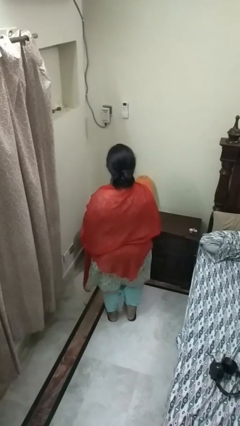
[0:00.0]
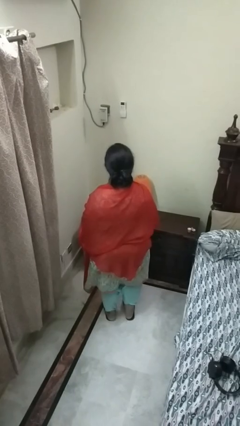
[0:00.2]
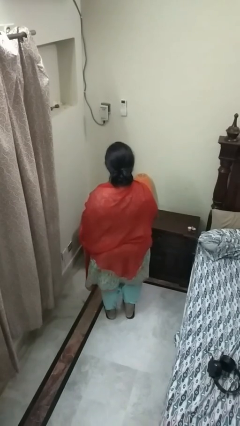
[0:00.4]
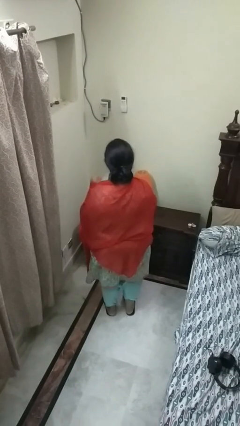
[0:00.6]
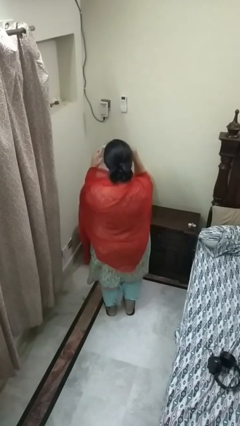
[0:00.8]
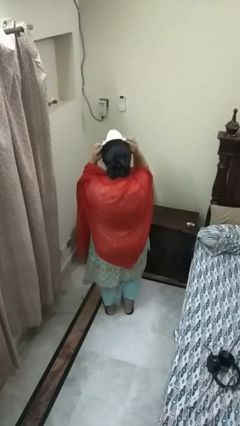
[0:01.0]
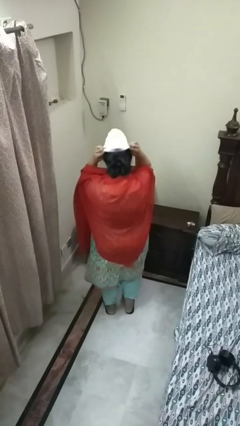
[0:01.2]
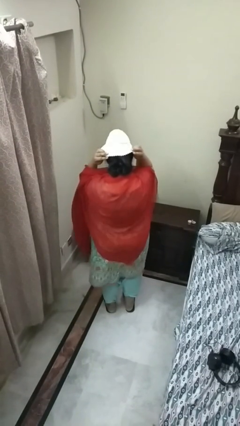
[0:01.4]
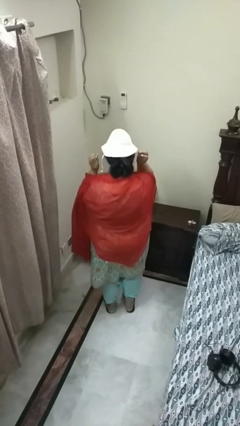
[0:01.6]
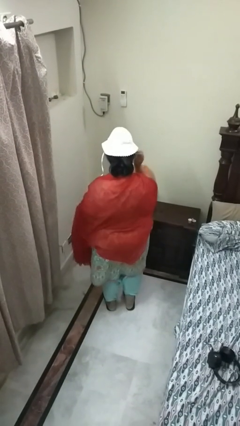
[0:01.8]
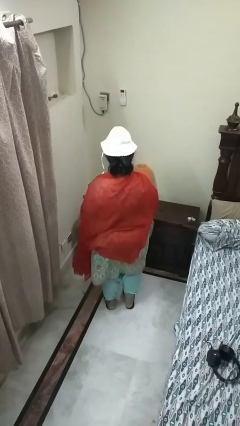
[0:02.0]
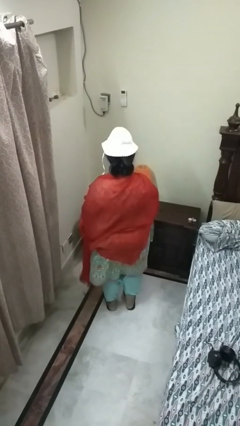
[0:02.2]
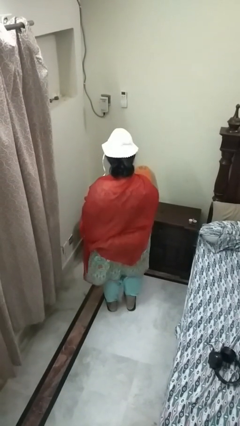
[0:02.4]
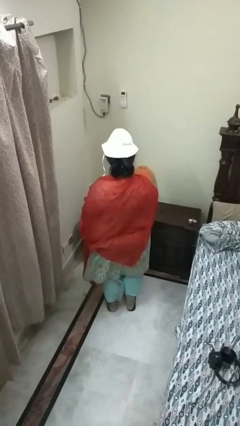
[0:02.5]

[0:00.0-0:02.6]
person puts on hat

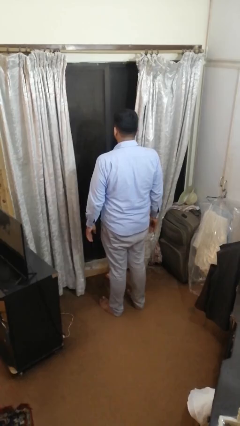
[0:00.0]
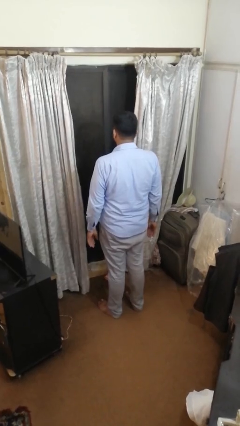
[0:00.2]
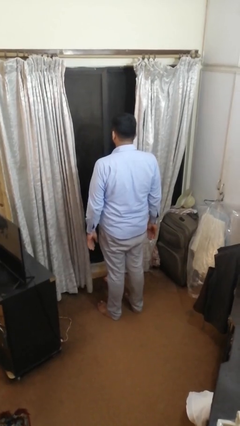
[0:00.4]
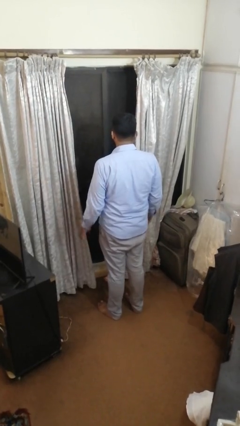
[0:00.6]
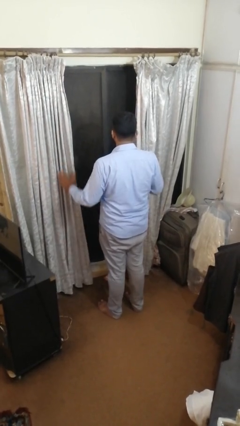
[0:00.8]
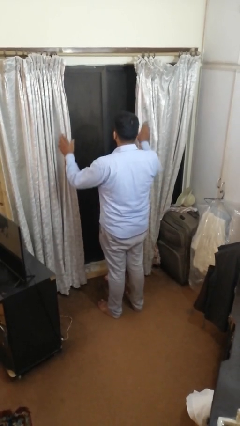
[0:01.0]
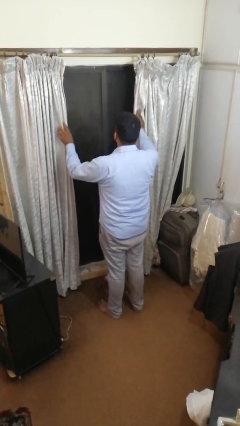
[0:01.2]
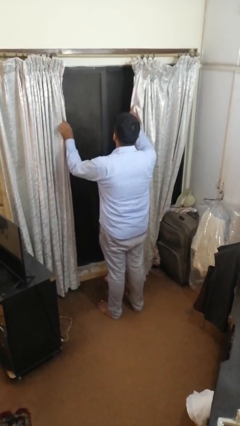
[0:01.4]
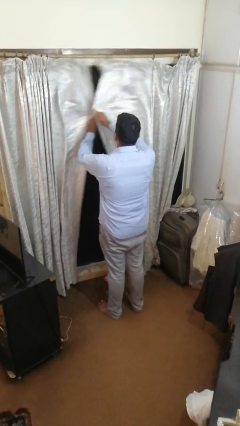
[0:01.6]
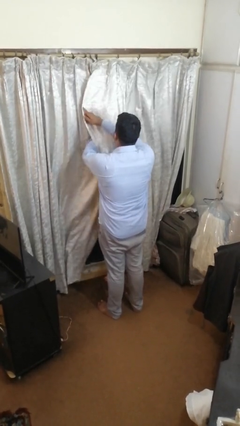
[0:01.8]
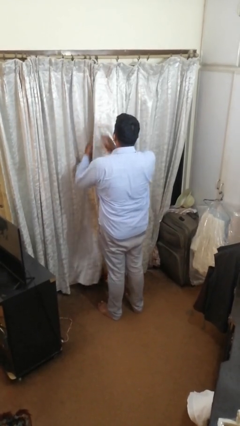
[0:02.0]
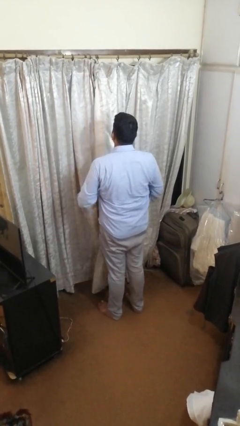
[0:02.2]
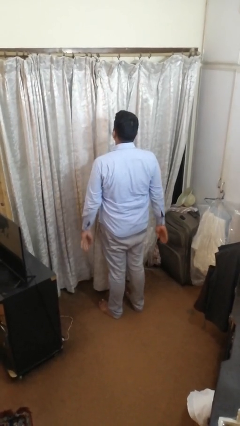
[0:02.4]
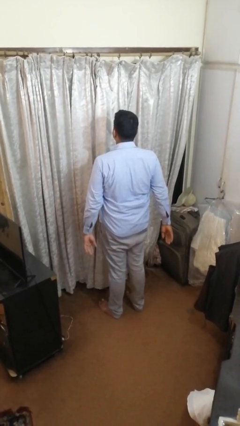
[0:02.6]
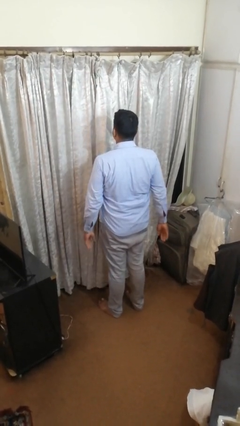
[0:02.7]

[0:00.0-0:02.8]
person closes curtains

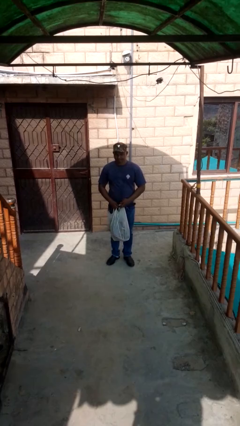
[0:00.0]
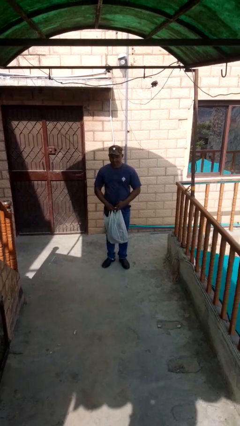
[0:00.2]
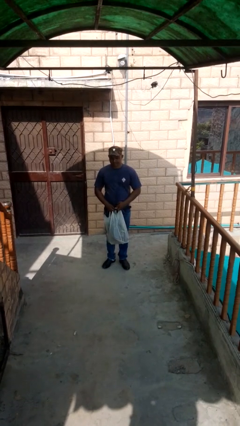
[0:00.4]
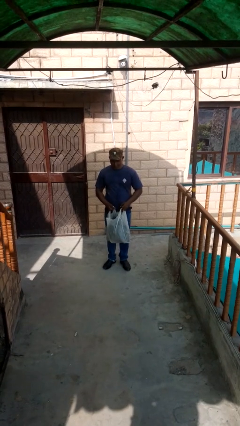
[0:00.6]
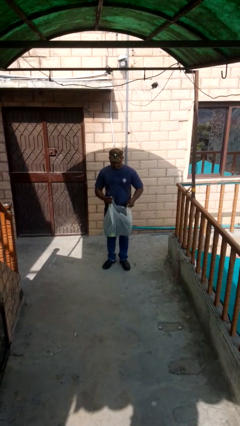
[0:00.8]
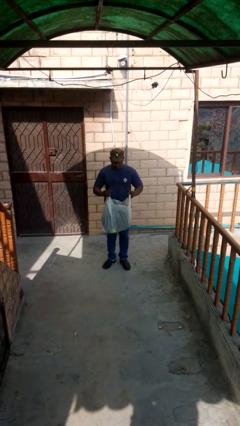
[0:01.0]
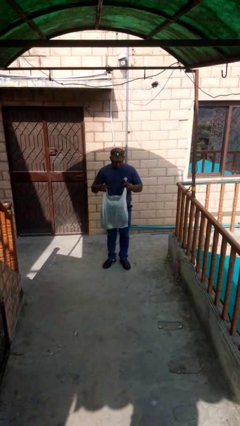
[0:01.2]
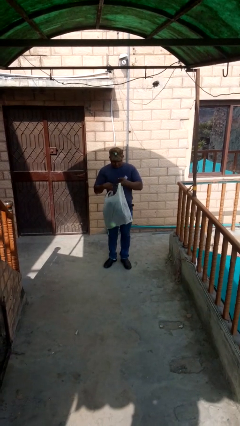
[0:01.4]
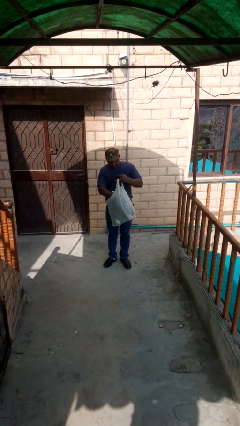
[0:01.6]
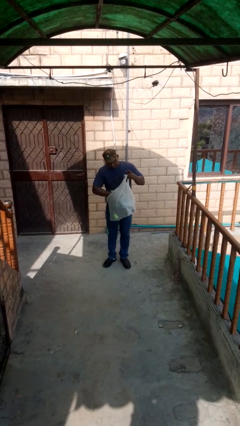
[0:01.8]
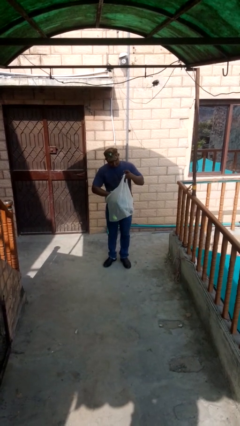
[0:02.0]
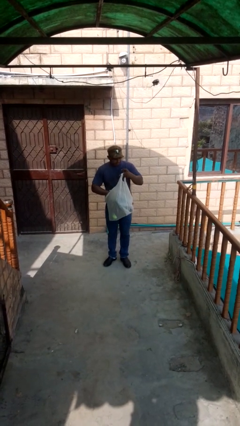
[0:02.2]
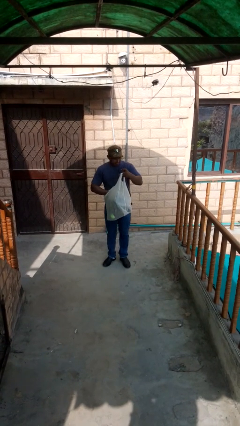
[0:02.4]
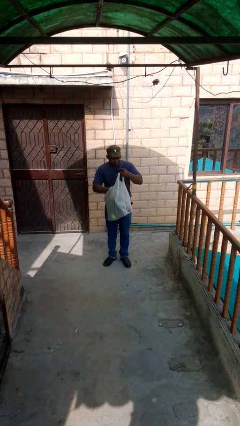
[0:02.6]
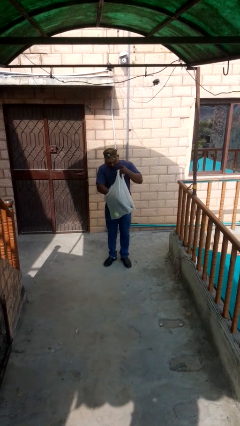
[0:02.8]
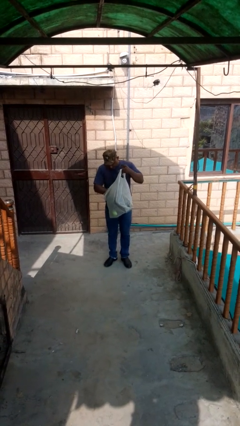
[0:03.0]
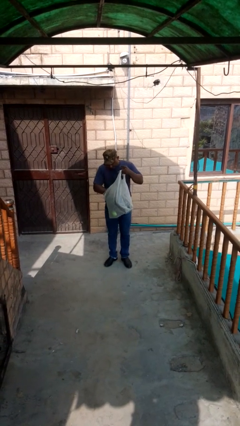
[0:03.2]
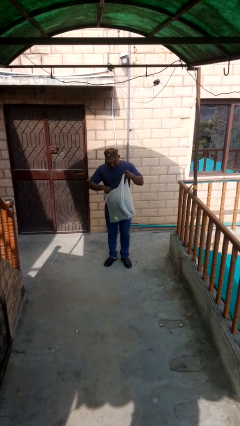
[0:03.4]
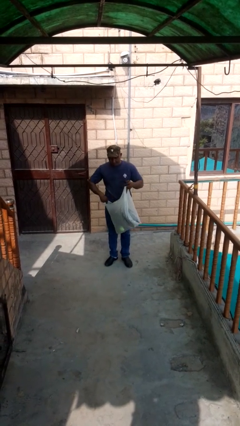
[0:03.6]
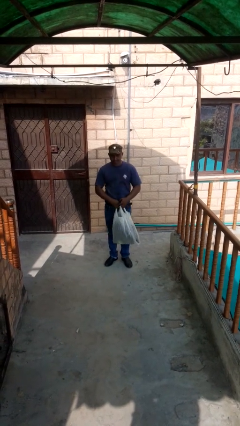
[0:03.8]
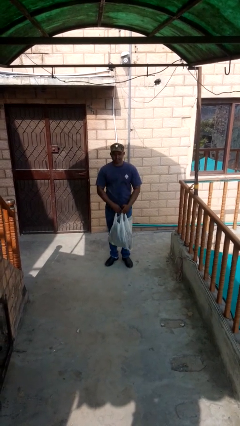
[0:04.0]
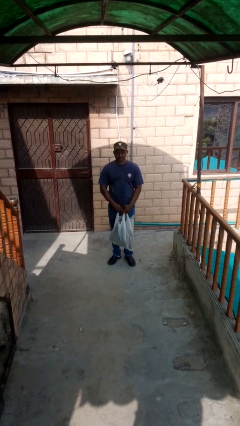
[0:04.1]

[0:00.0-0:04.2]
person searches in bag

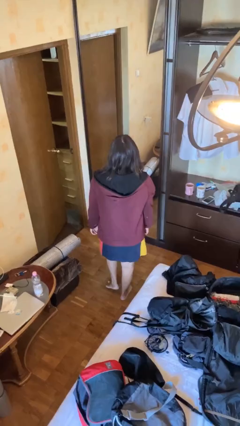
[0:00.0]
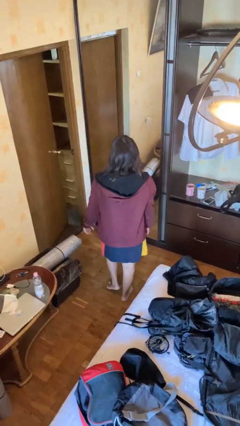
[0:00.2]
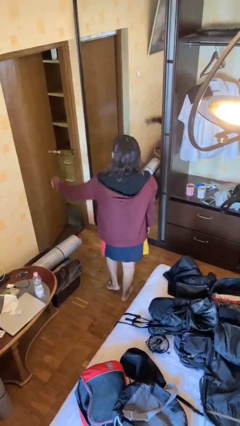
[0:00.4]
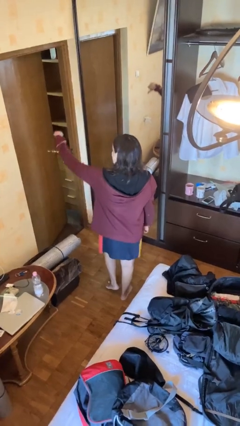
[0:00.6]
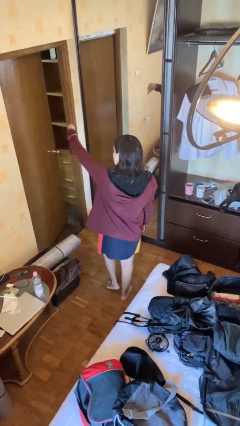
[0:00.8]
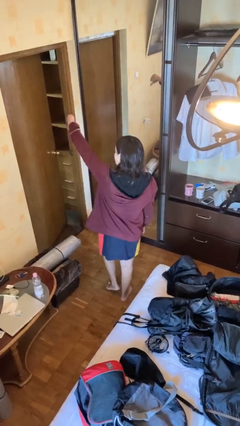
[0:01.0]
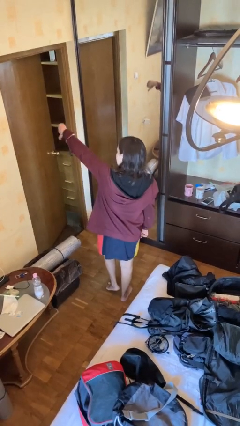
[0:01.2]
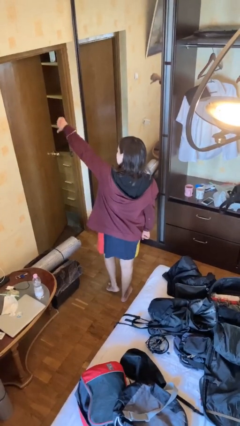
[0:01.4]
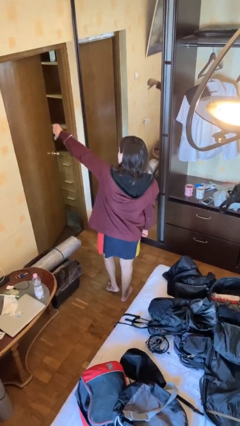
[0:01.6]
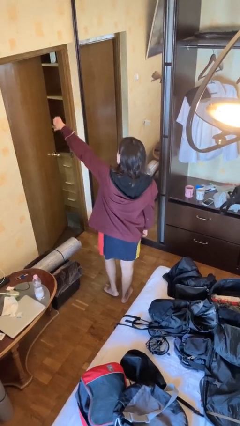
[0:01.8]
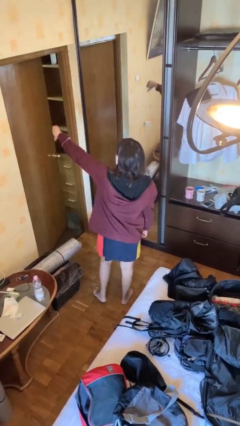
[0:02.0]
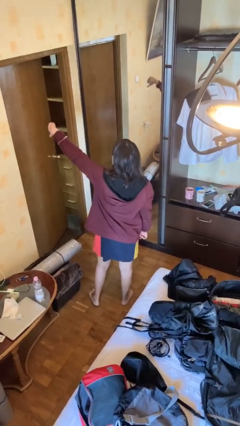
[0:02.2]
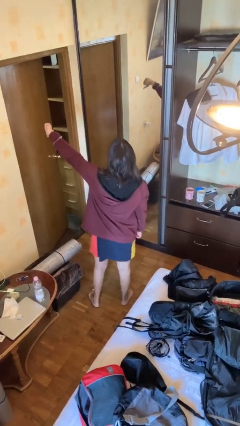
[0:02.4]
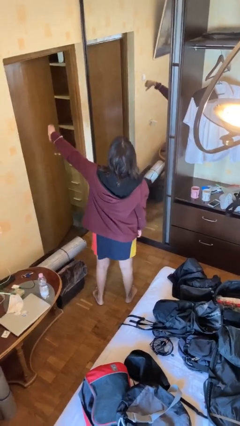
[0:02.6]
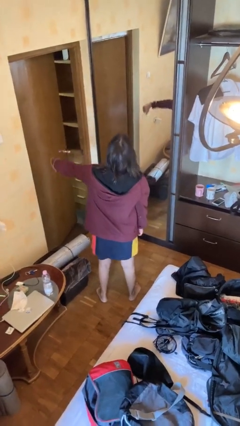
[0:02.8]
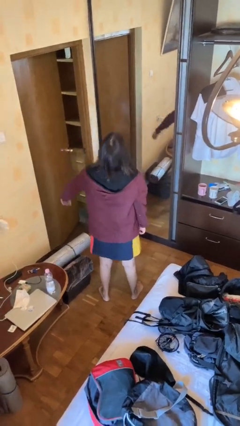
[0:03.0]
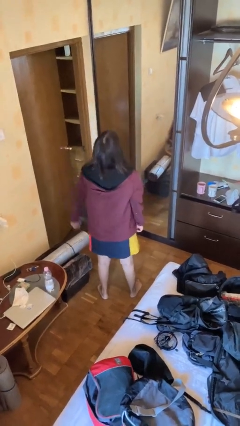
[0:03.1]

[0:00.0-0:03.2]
person gestures thumbs down

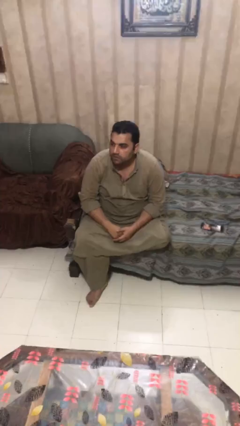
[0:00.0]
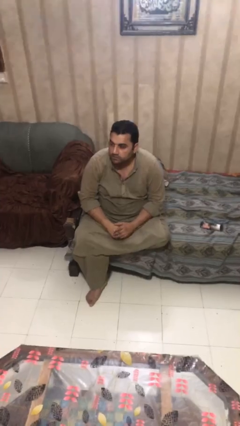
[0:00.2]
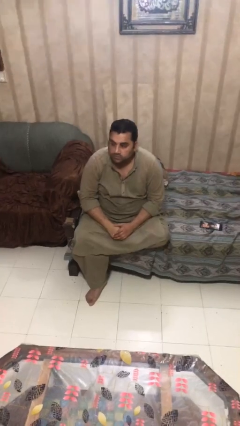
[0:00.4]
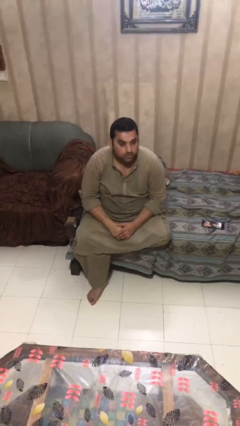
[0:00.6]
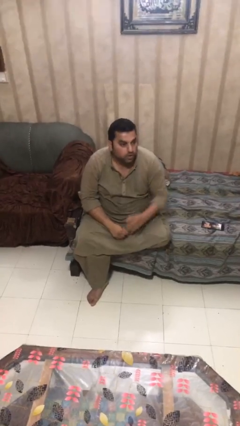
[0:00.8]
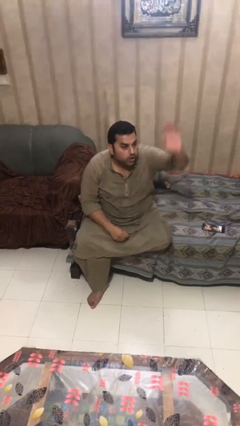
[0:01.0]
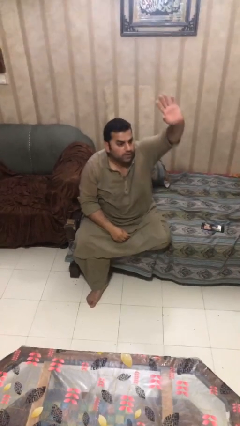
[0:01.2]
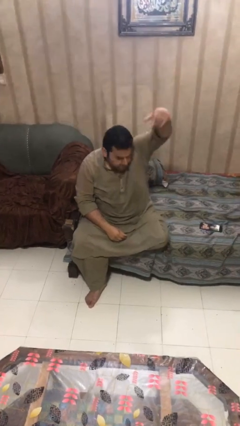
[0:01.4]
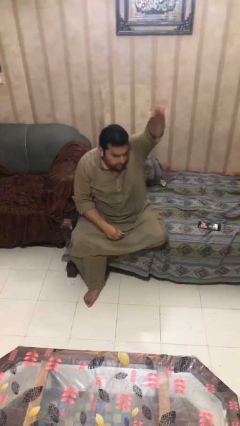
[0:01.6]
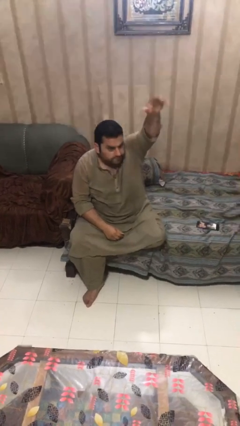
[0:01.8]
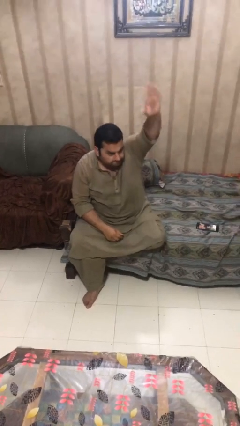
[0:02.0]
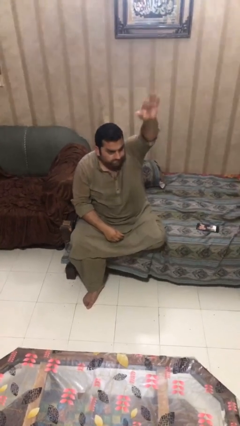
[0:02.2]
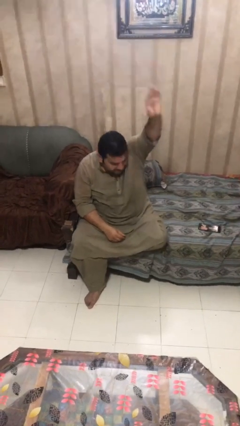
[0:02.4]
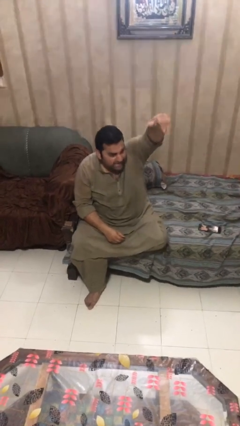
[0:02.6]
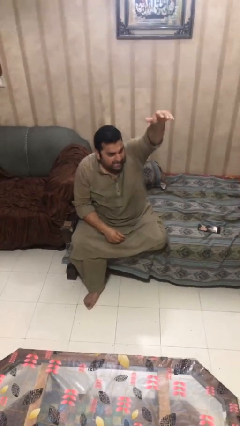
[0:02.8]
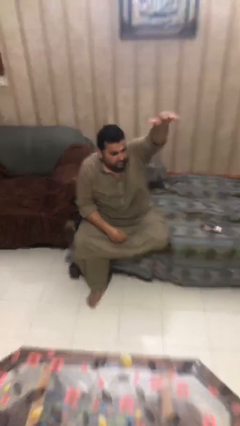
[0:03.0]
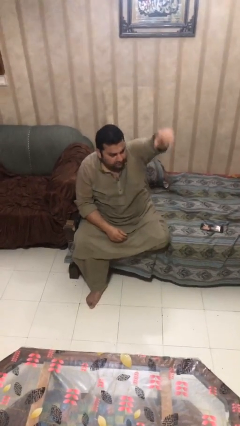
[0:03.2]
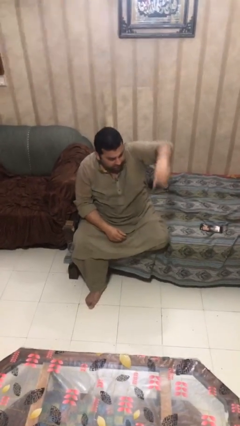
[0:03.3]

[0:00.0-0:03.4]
person gestures come here

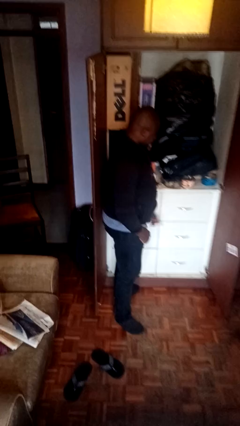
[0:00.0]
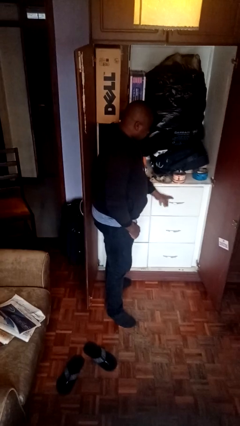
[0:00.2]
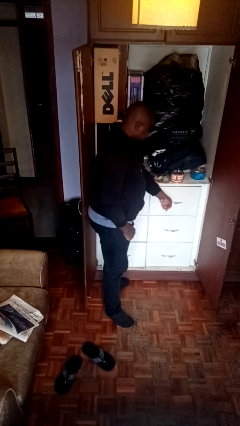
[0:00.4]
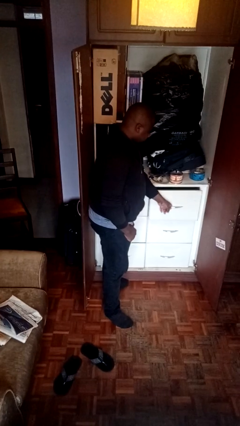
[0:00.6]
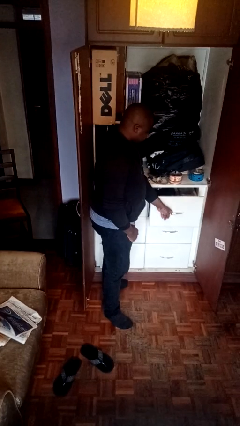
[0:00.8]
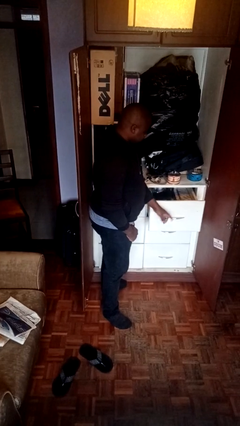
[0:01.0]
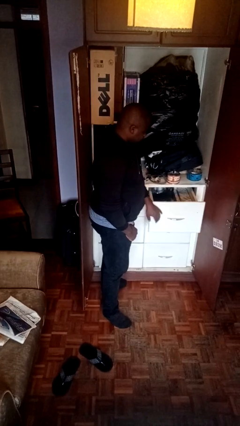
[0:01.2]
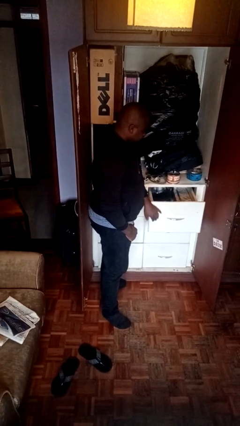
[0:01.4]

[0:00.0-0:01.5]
person opens dresser drawer
